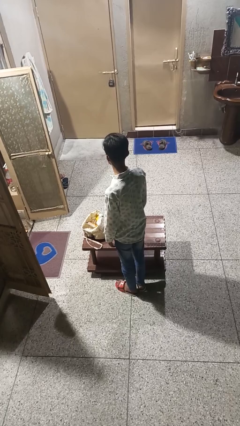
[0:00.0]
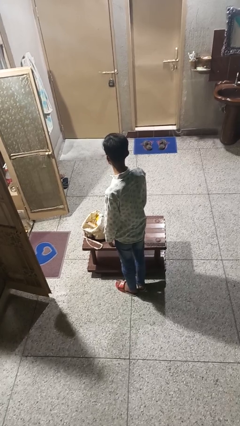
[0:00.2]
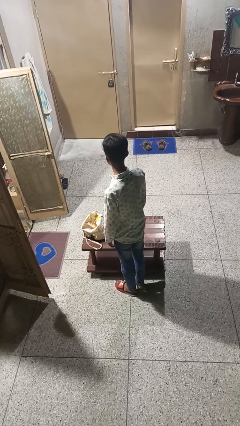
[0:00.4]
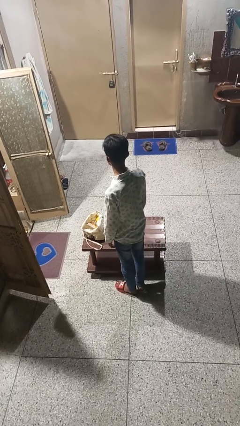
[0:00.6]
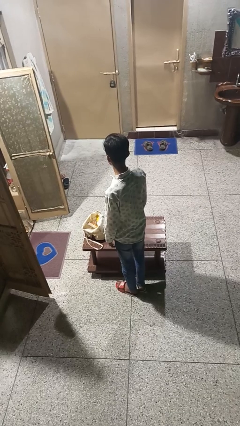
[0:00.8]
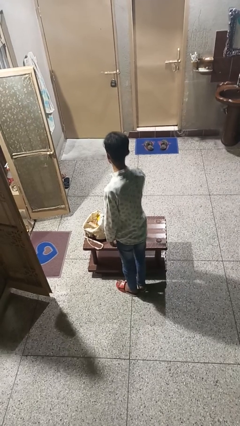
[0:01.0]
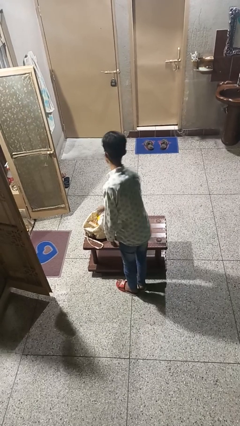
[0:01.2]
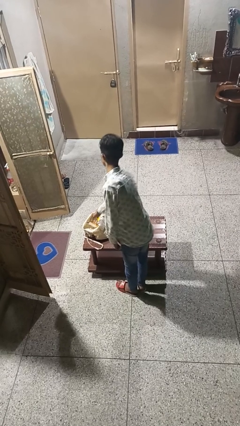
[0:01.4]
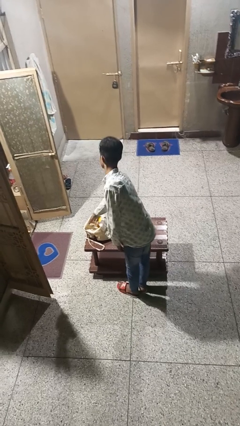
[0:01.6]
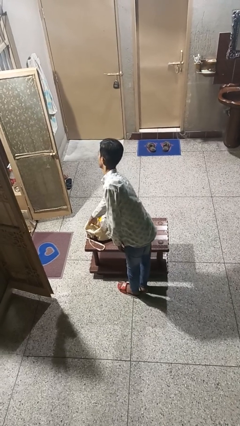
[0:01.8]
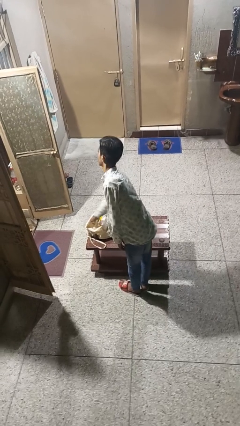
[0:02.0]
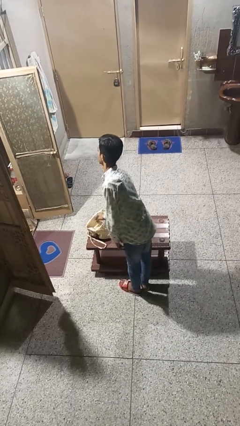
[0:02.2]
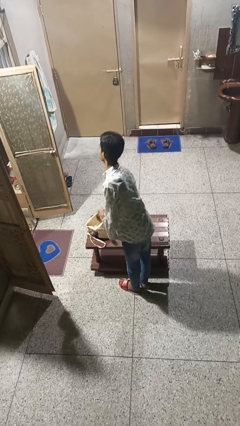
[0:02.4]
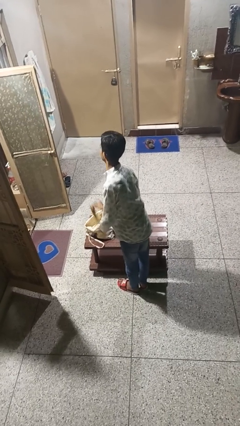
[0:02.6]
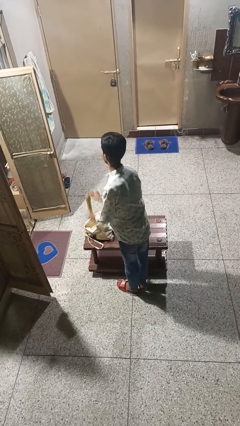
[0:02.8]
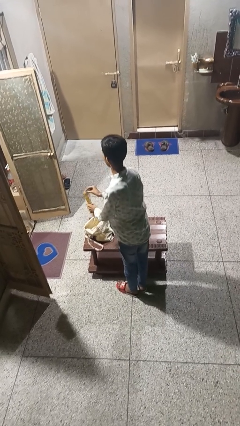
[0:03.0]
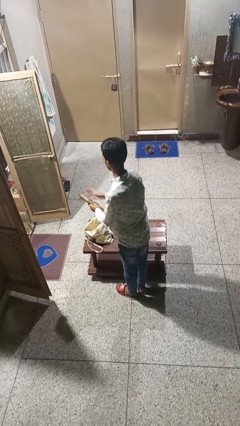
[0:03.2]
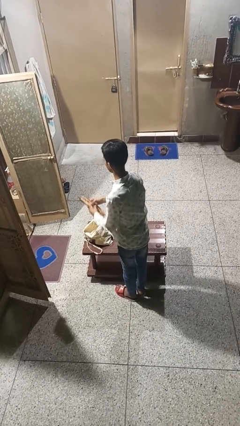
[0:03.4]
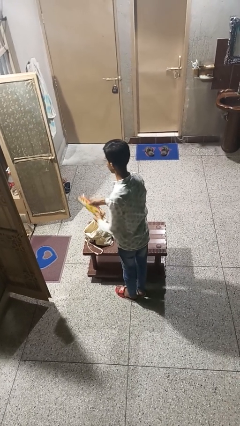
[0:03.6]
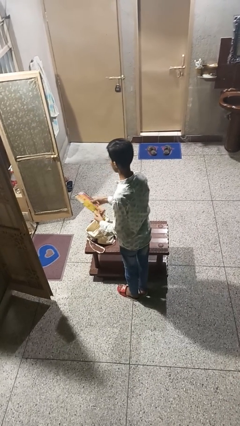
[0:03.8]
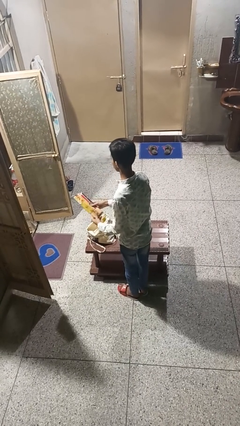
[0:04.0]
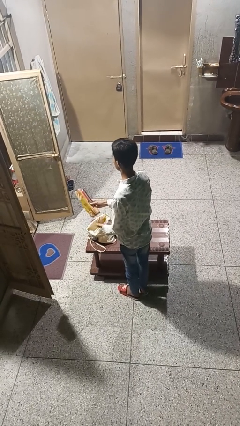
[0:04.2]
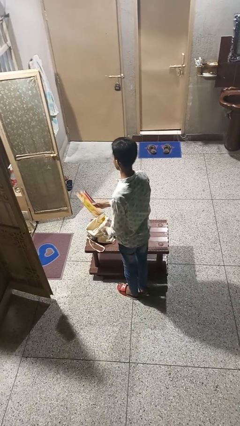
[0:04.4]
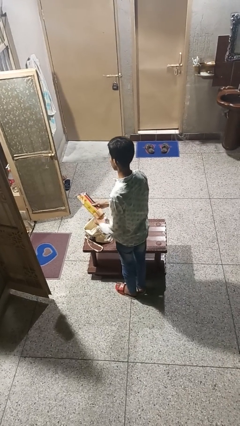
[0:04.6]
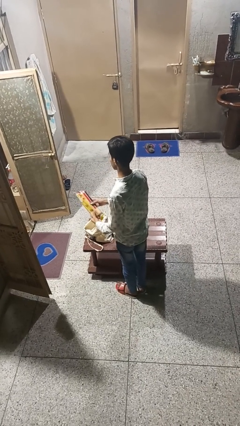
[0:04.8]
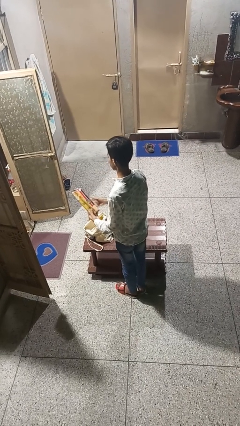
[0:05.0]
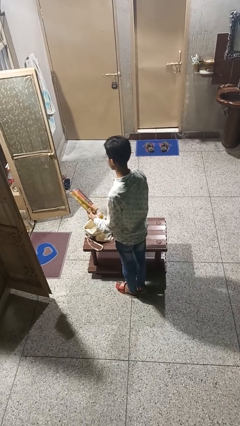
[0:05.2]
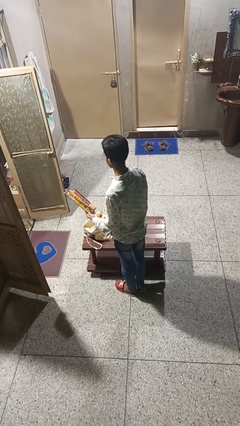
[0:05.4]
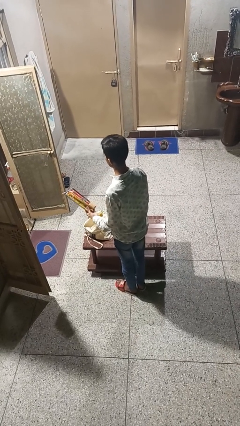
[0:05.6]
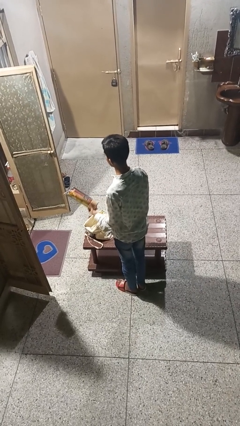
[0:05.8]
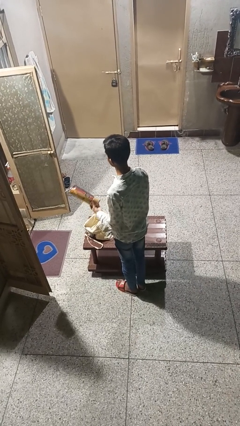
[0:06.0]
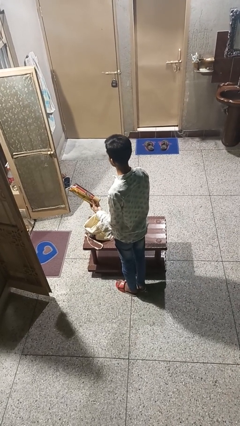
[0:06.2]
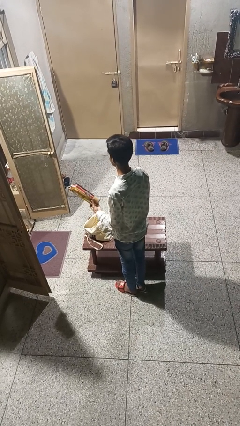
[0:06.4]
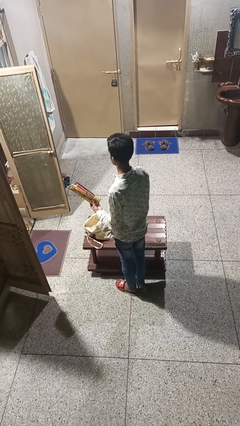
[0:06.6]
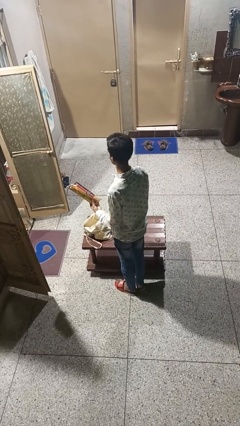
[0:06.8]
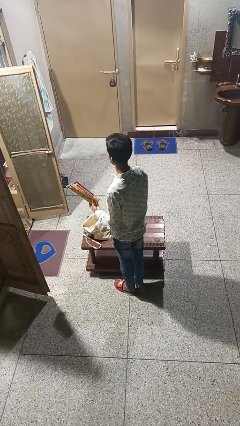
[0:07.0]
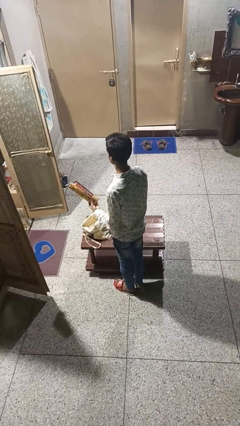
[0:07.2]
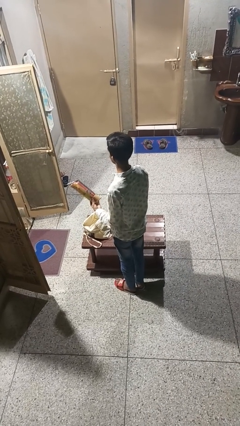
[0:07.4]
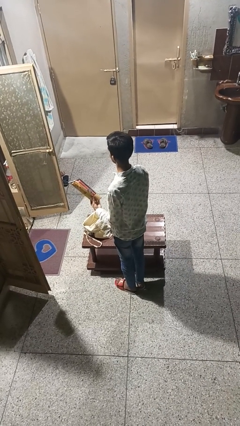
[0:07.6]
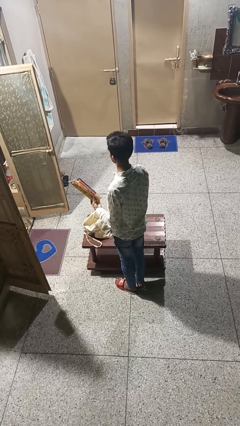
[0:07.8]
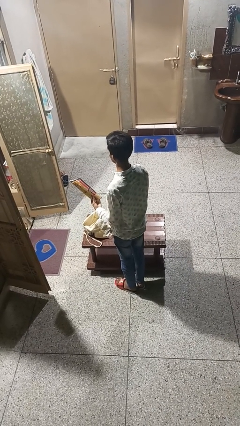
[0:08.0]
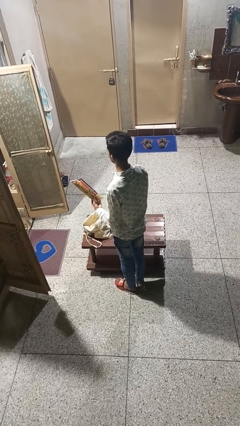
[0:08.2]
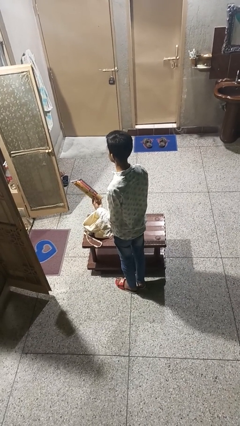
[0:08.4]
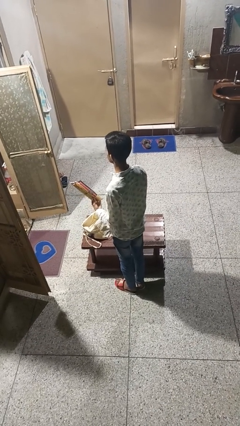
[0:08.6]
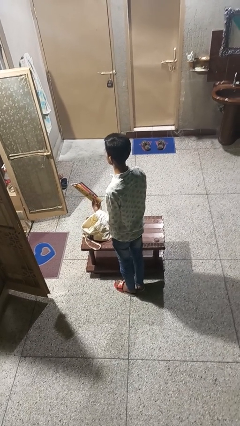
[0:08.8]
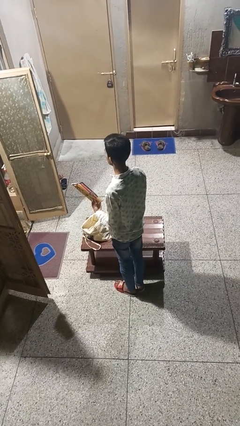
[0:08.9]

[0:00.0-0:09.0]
person takes object from bag

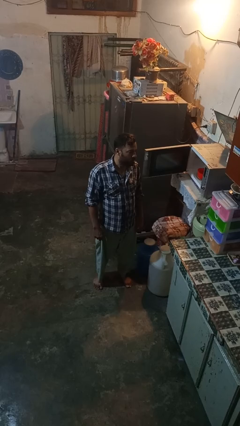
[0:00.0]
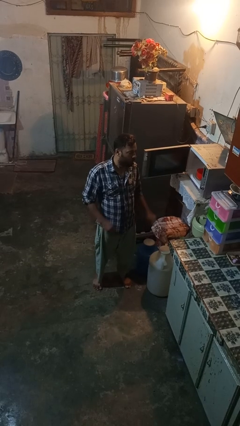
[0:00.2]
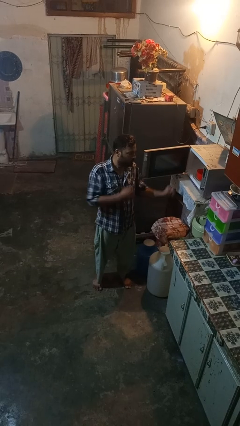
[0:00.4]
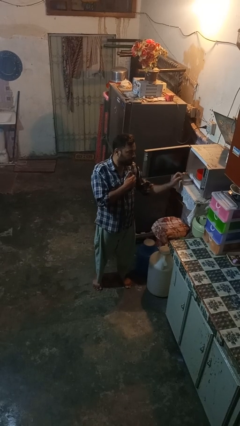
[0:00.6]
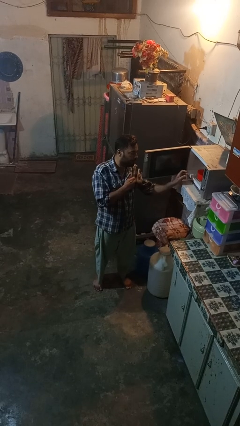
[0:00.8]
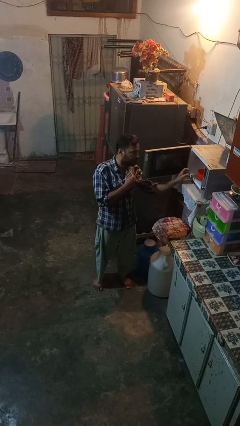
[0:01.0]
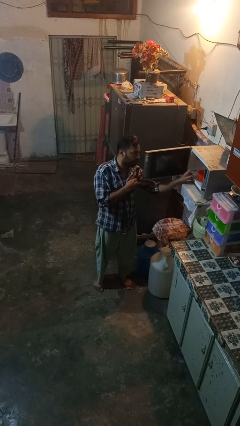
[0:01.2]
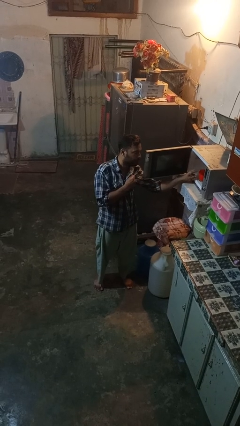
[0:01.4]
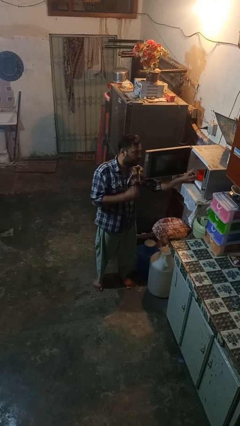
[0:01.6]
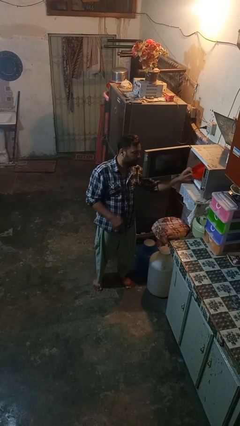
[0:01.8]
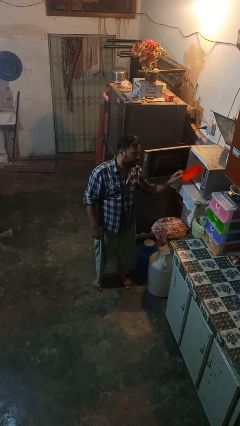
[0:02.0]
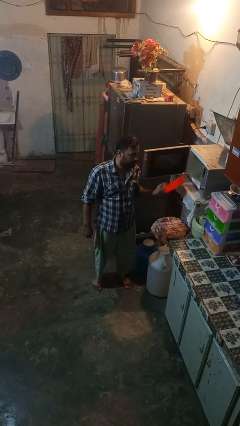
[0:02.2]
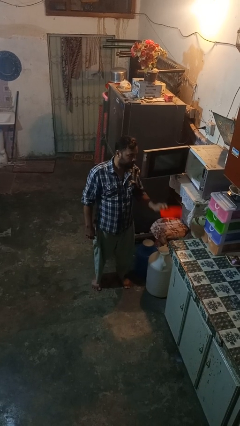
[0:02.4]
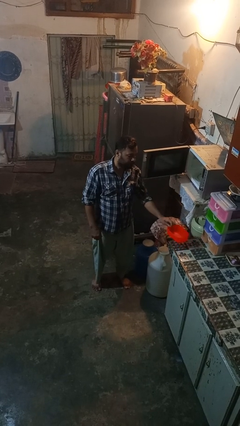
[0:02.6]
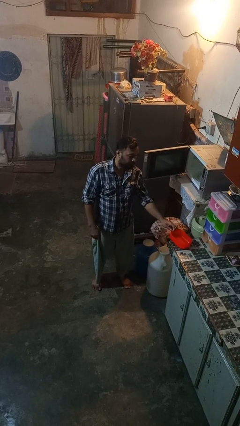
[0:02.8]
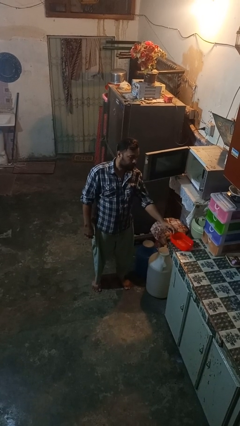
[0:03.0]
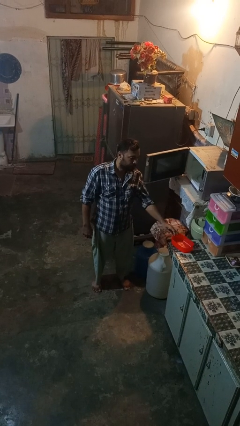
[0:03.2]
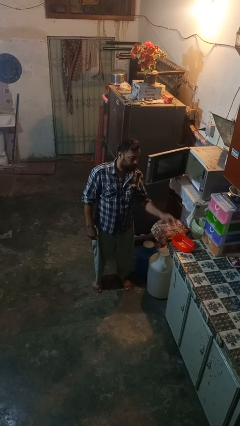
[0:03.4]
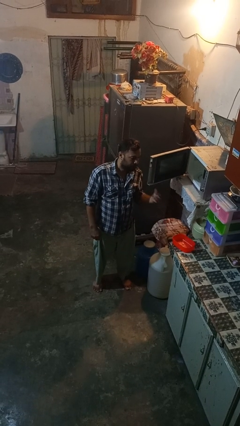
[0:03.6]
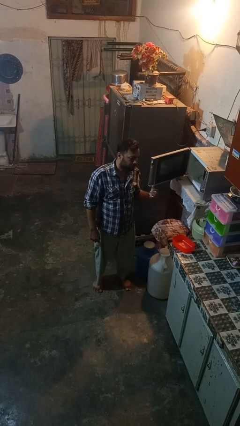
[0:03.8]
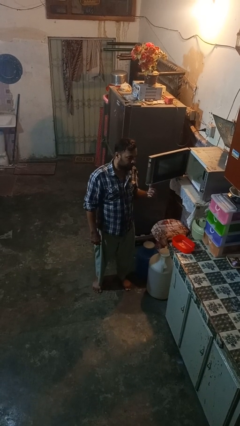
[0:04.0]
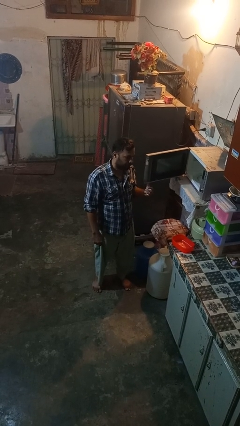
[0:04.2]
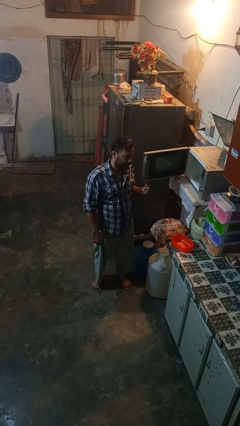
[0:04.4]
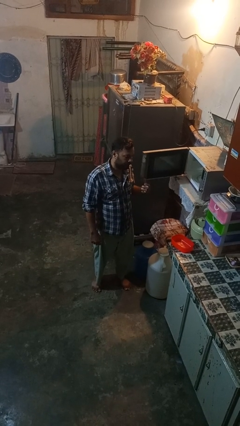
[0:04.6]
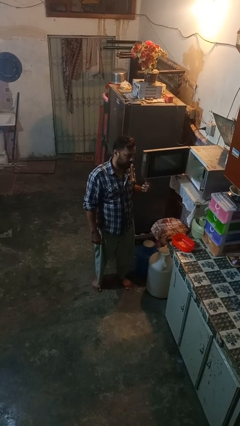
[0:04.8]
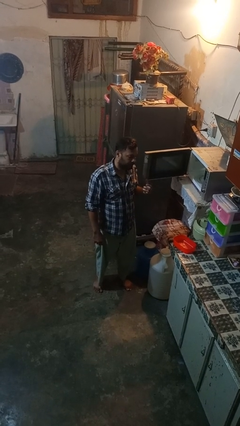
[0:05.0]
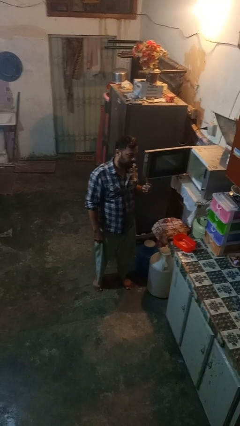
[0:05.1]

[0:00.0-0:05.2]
person takes object from microwave

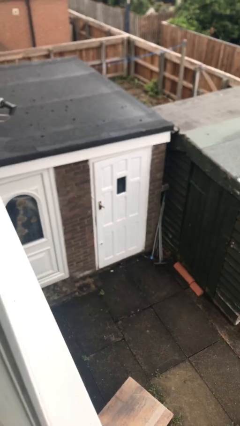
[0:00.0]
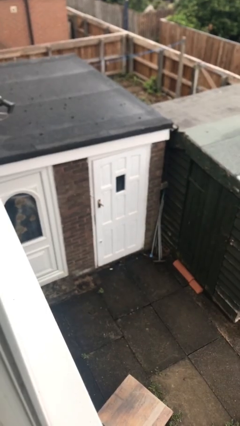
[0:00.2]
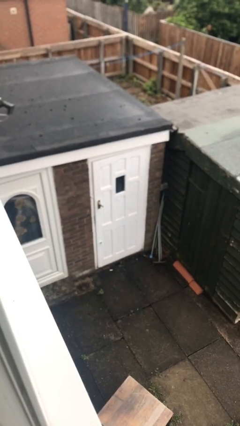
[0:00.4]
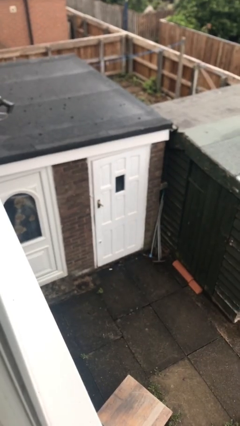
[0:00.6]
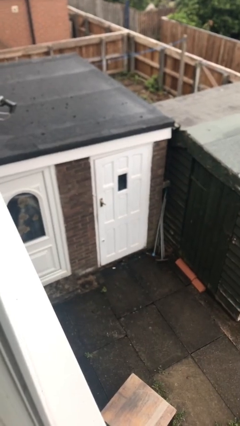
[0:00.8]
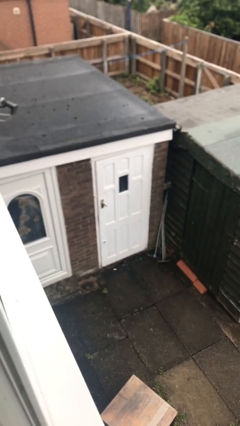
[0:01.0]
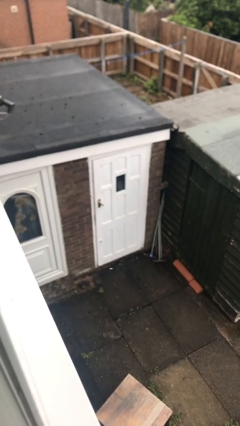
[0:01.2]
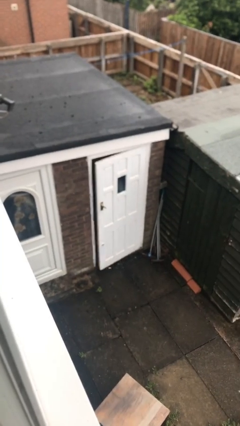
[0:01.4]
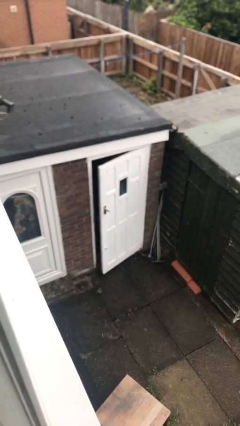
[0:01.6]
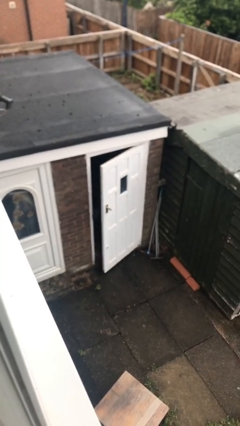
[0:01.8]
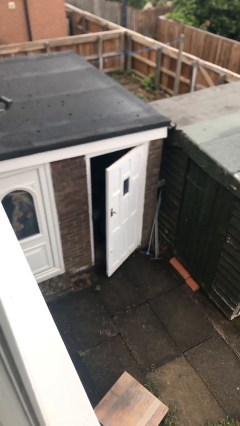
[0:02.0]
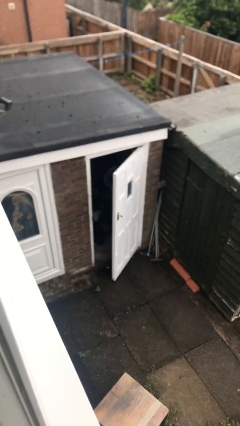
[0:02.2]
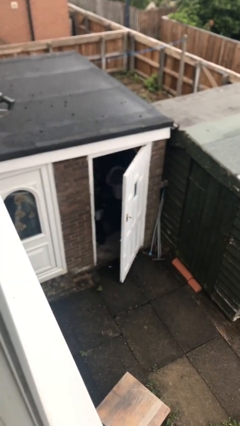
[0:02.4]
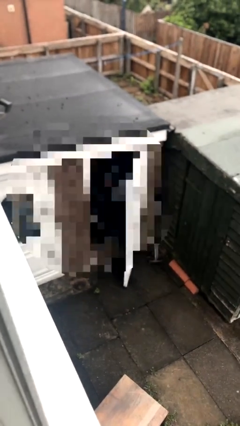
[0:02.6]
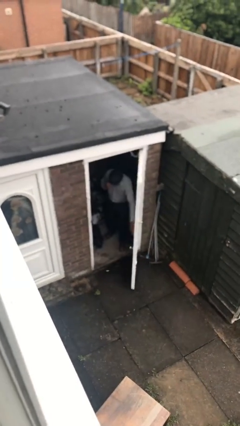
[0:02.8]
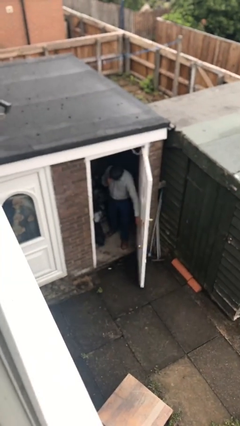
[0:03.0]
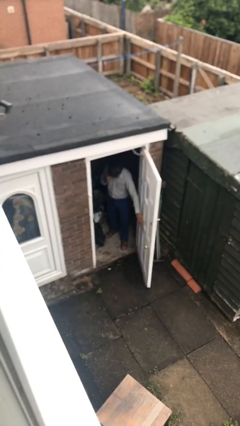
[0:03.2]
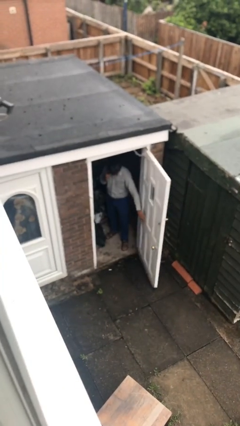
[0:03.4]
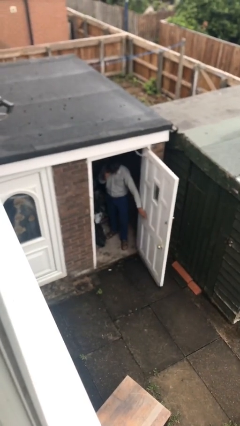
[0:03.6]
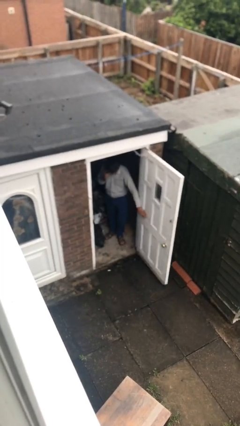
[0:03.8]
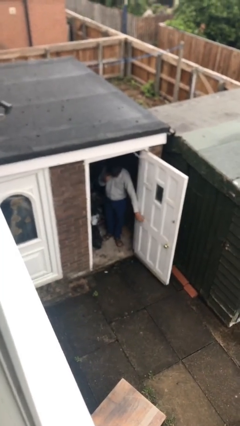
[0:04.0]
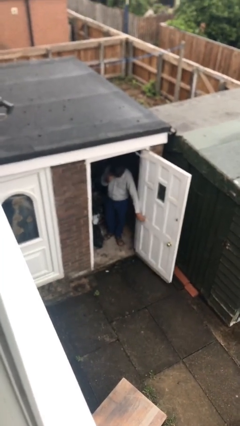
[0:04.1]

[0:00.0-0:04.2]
person opens facility door
